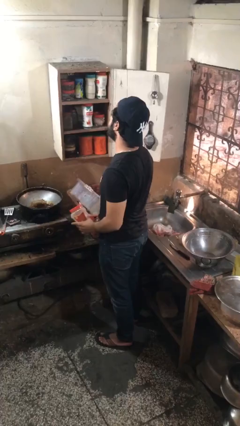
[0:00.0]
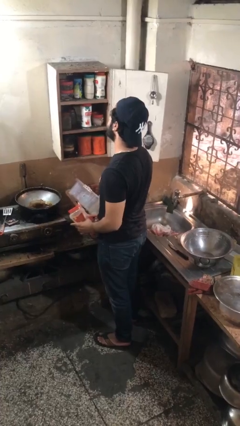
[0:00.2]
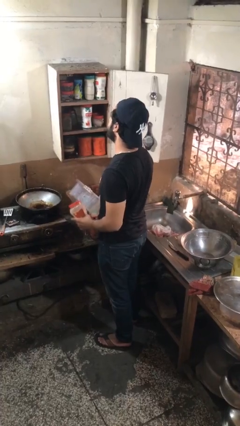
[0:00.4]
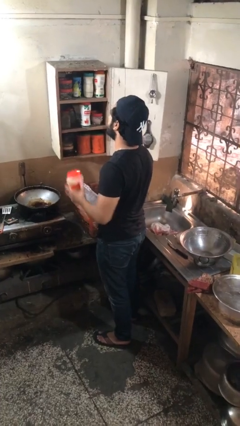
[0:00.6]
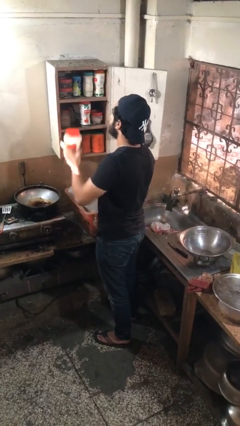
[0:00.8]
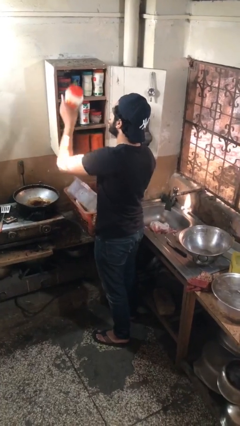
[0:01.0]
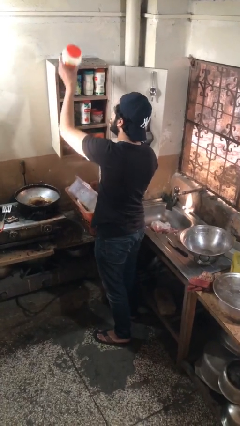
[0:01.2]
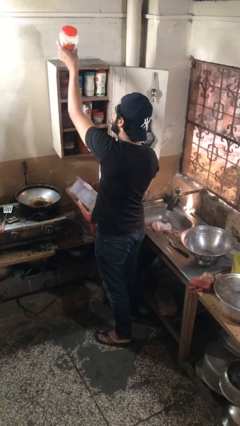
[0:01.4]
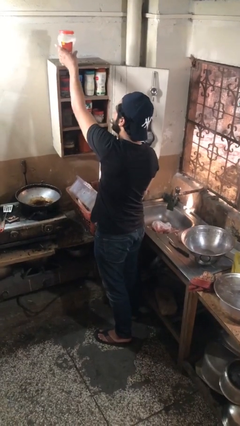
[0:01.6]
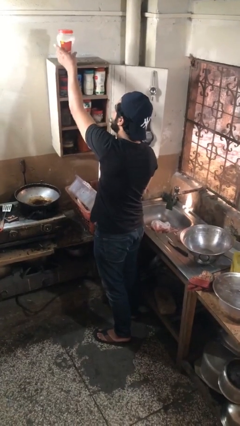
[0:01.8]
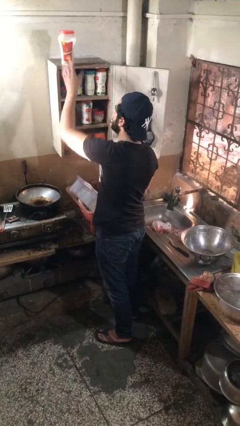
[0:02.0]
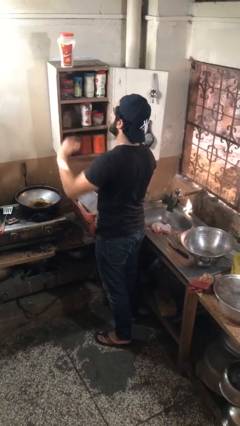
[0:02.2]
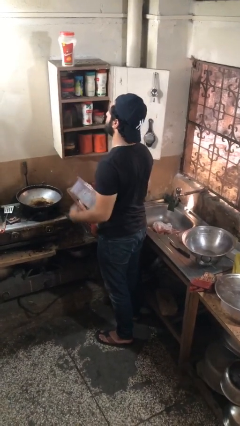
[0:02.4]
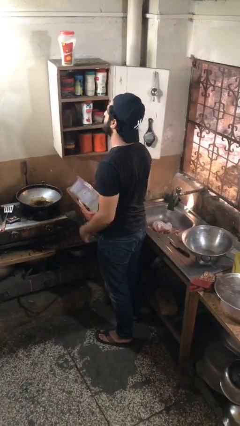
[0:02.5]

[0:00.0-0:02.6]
person puts object in cabinet

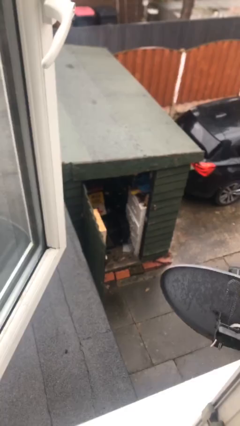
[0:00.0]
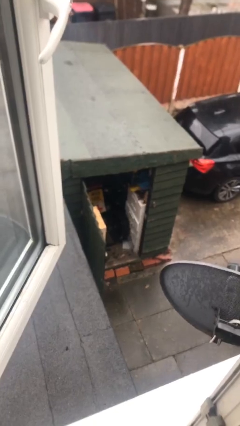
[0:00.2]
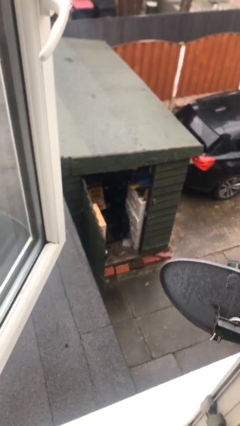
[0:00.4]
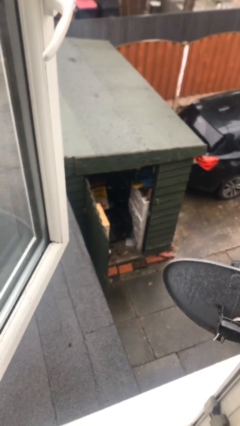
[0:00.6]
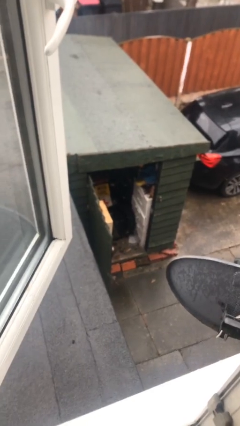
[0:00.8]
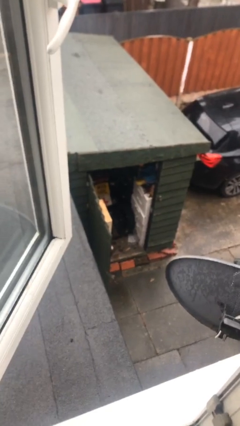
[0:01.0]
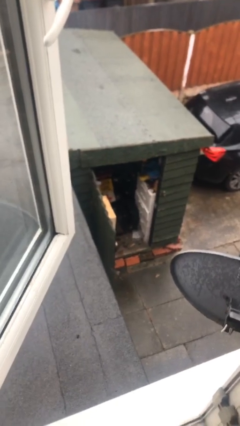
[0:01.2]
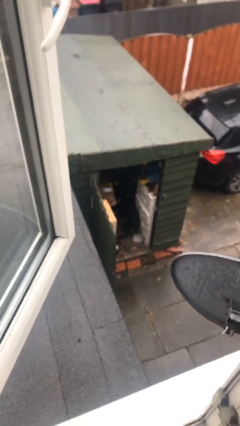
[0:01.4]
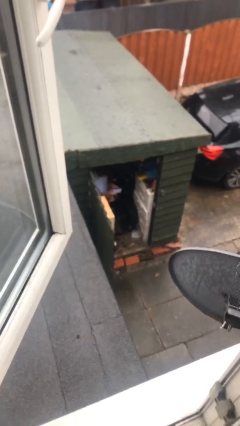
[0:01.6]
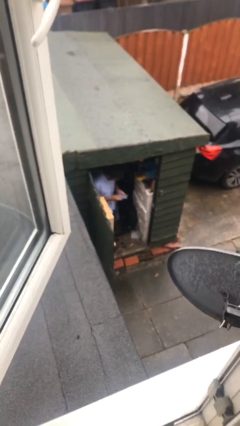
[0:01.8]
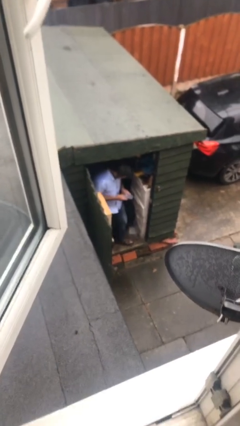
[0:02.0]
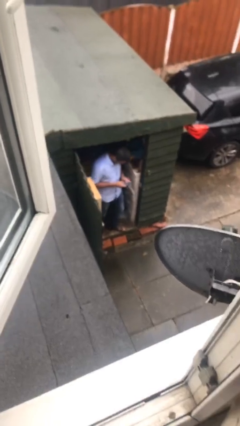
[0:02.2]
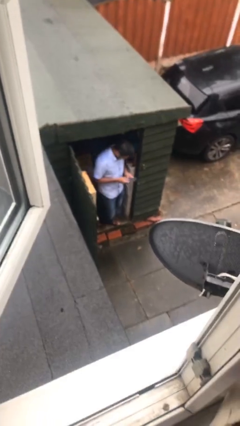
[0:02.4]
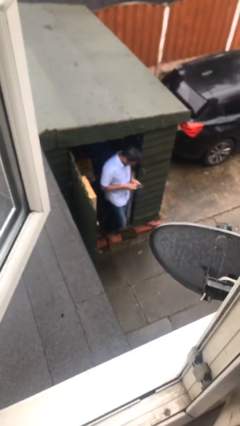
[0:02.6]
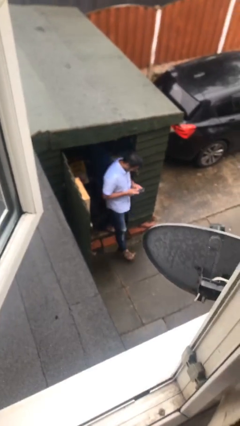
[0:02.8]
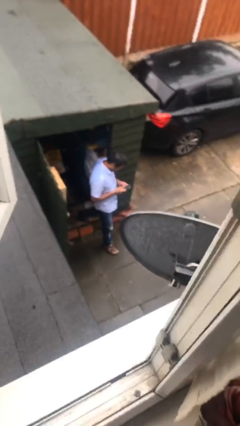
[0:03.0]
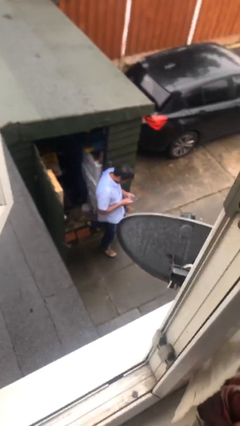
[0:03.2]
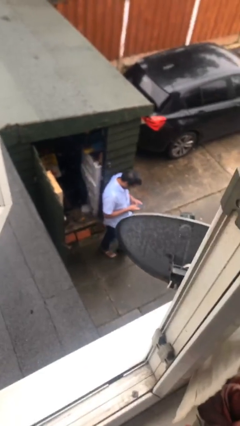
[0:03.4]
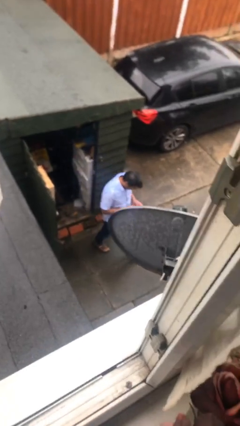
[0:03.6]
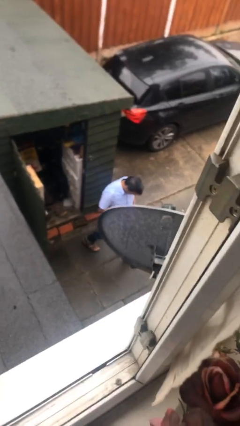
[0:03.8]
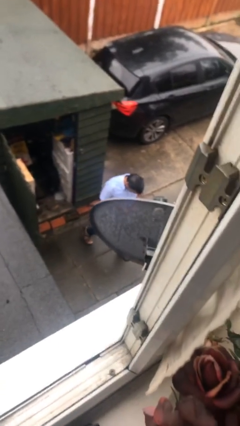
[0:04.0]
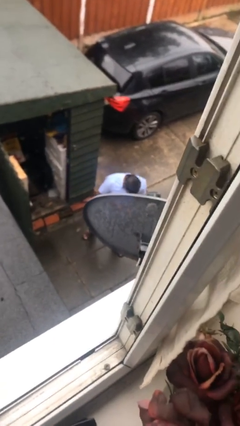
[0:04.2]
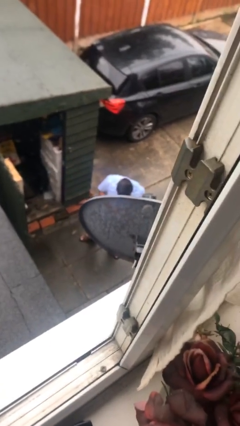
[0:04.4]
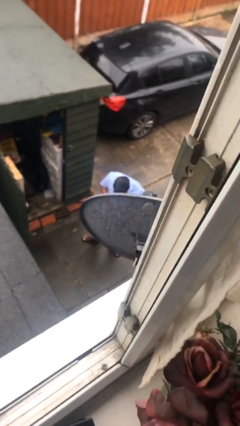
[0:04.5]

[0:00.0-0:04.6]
person enters scene through structure

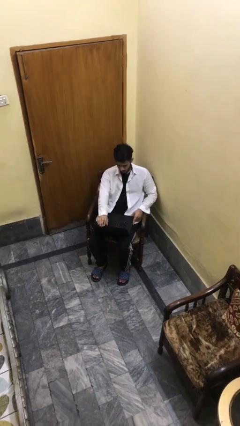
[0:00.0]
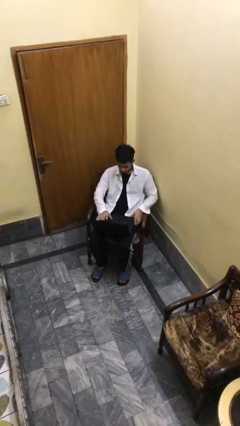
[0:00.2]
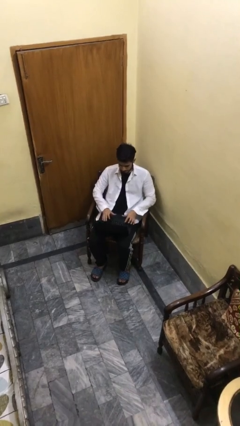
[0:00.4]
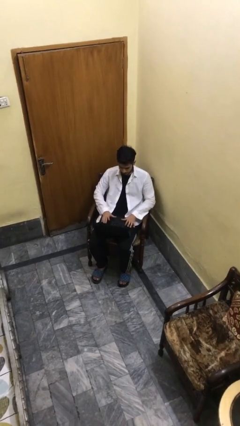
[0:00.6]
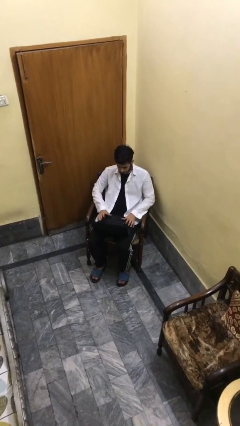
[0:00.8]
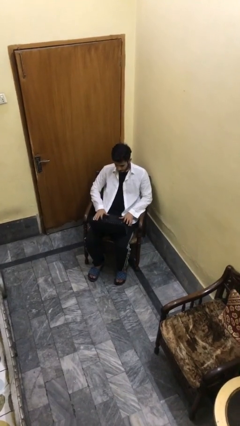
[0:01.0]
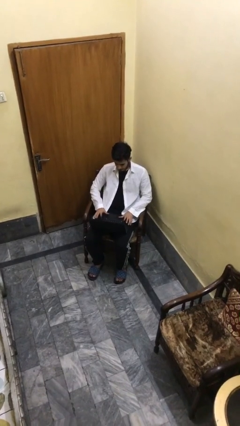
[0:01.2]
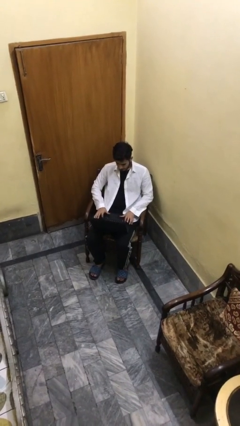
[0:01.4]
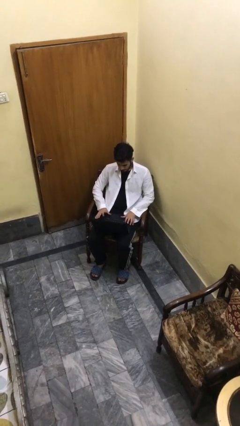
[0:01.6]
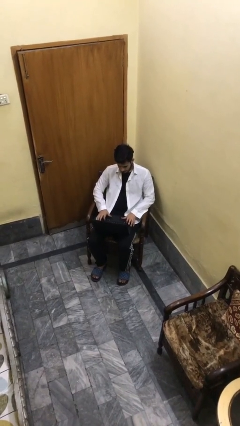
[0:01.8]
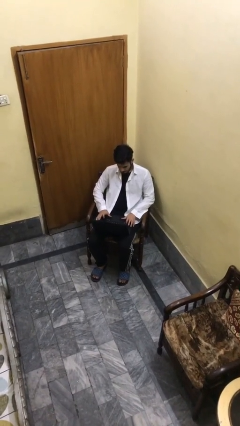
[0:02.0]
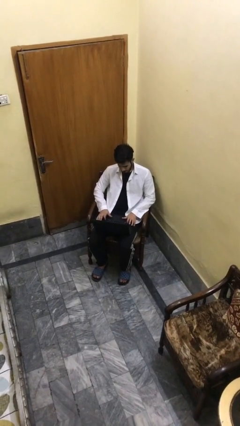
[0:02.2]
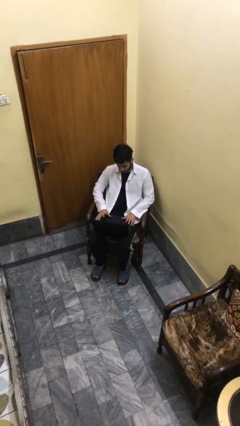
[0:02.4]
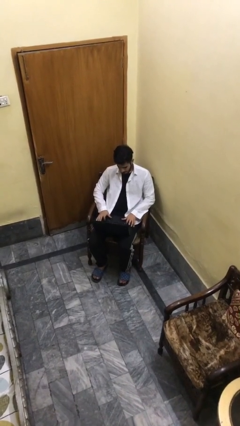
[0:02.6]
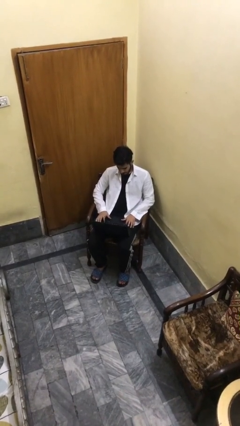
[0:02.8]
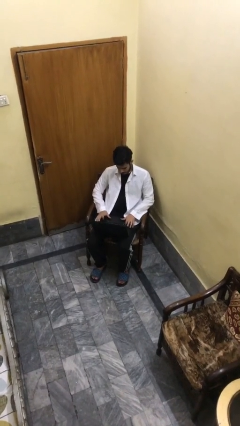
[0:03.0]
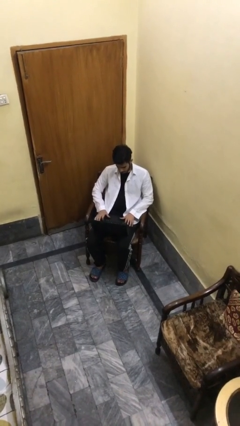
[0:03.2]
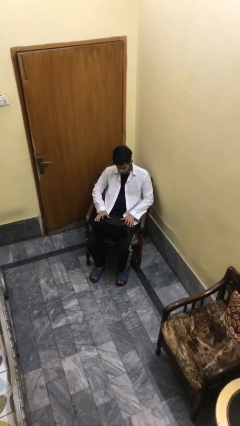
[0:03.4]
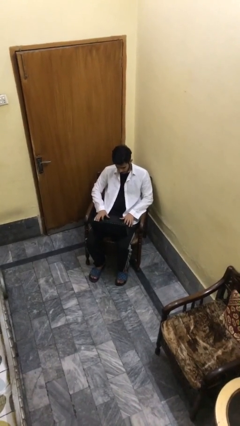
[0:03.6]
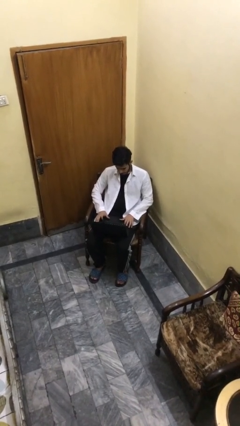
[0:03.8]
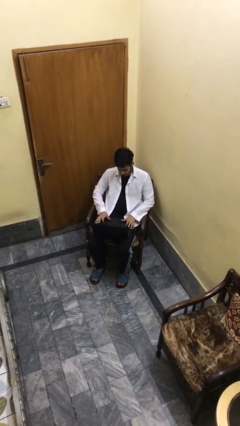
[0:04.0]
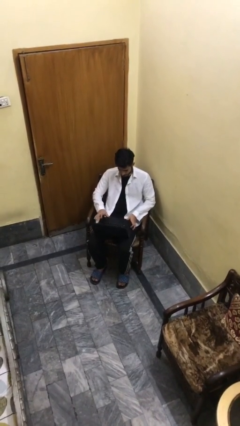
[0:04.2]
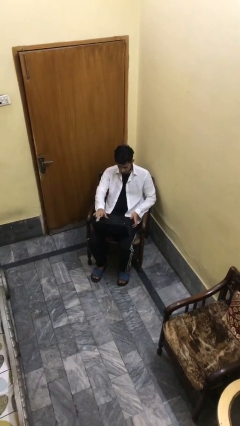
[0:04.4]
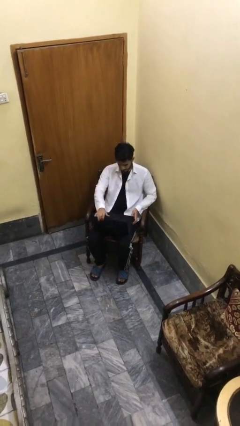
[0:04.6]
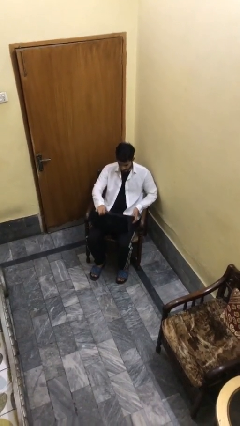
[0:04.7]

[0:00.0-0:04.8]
person interacts with laptop

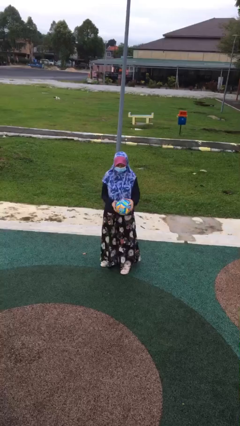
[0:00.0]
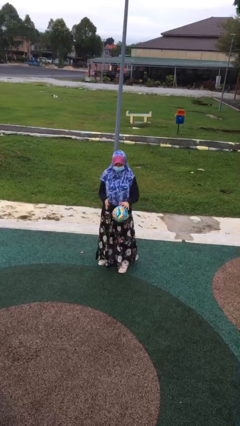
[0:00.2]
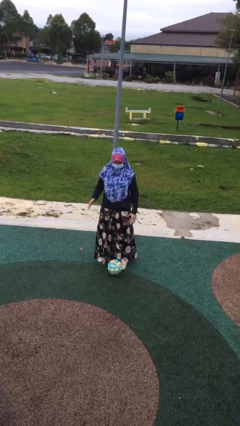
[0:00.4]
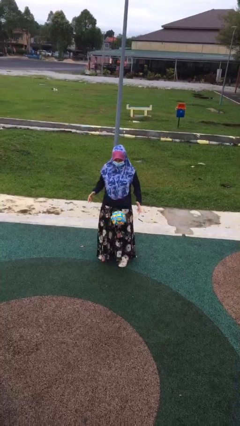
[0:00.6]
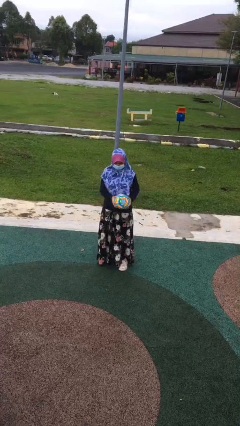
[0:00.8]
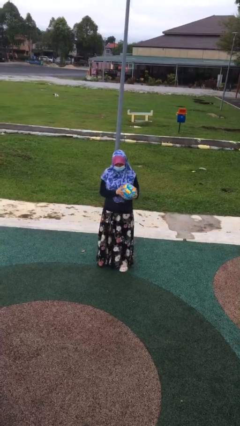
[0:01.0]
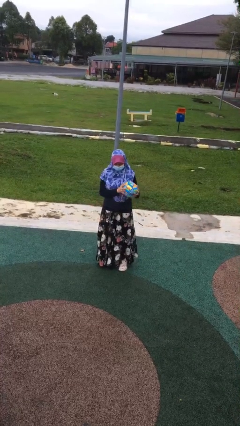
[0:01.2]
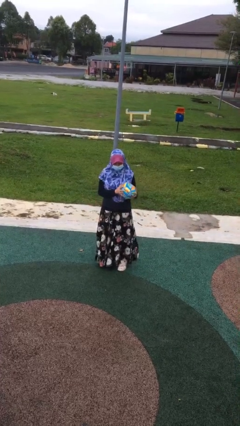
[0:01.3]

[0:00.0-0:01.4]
person bounces ball on floor

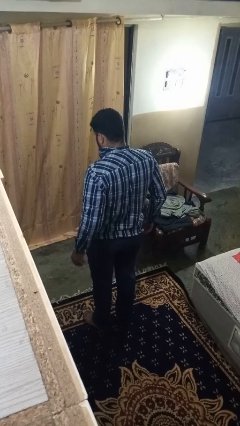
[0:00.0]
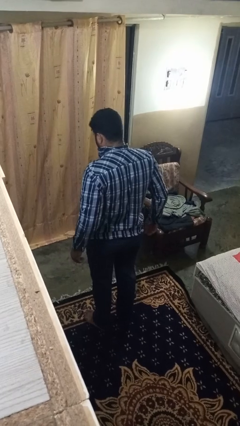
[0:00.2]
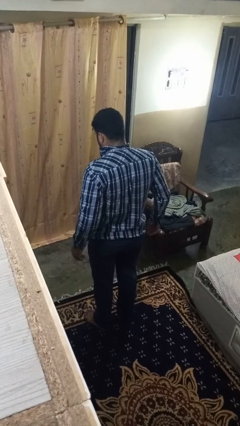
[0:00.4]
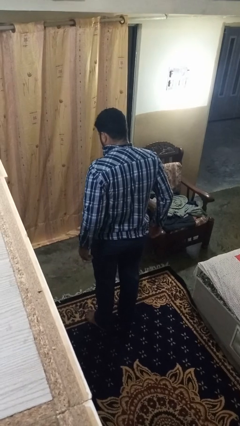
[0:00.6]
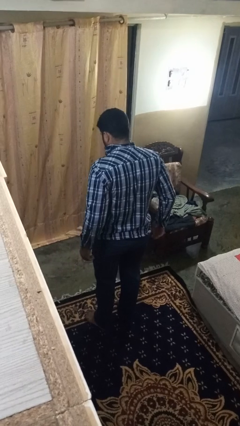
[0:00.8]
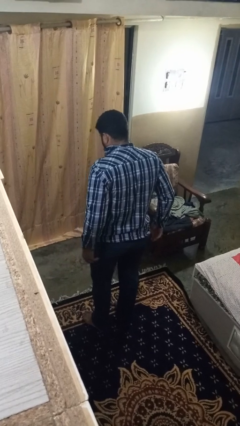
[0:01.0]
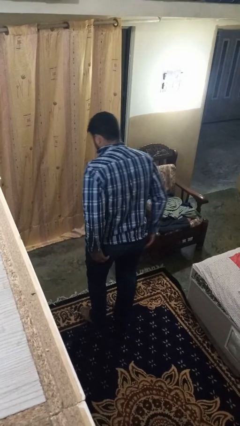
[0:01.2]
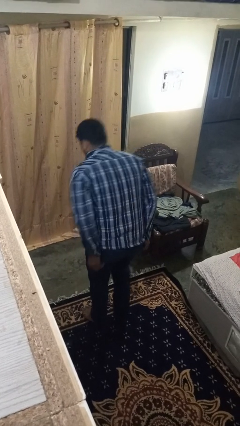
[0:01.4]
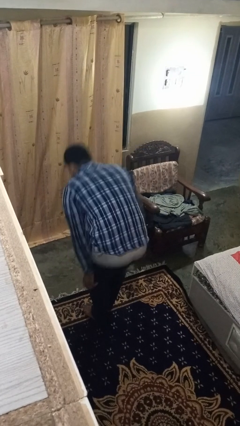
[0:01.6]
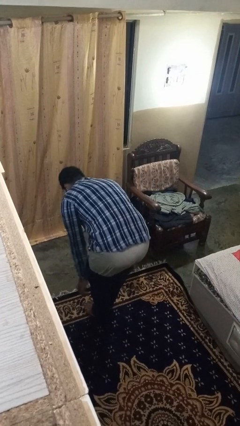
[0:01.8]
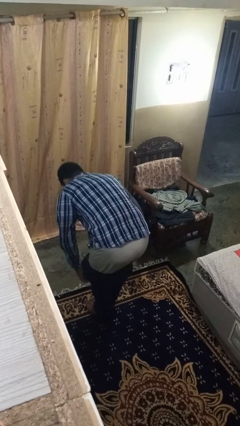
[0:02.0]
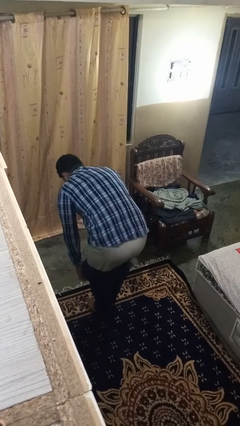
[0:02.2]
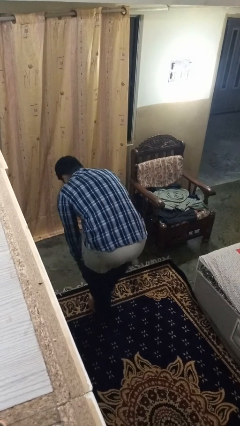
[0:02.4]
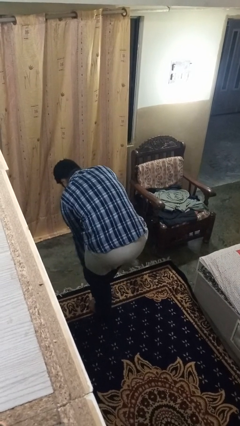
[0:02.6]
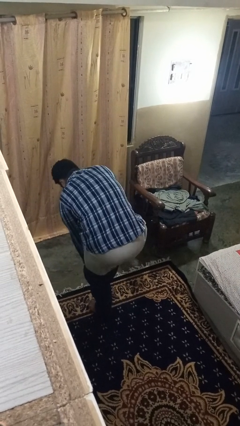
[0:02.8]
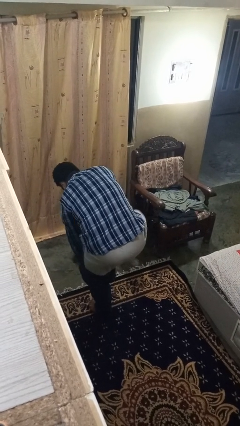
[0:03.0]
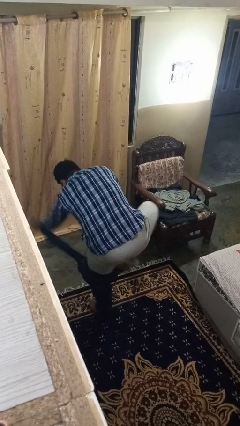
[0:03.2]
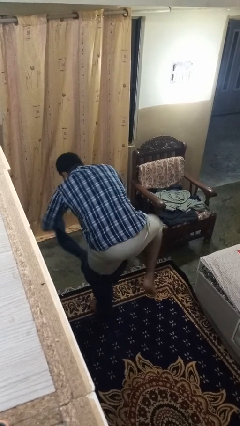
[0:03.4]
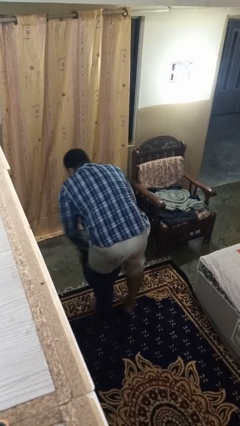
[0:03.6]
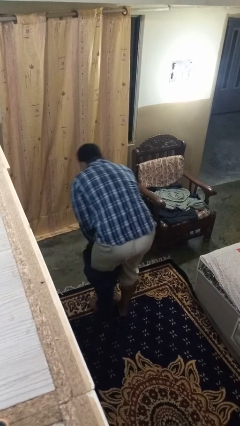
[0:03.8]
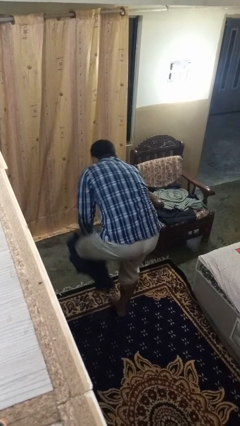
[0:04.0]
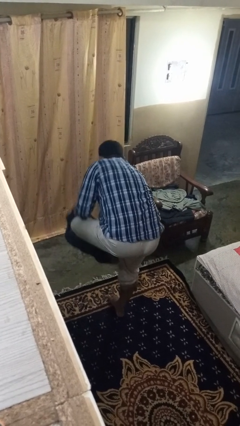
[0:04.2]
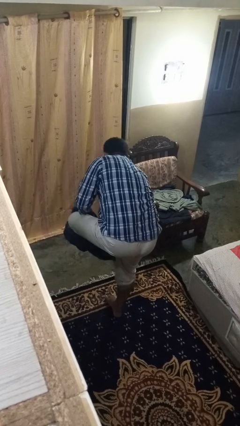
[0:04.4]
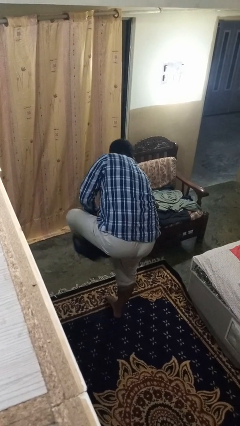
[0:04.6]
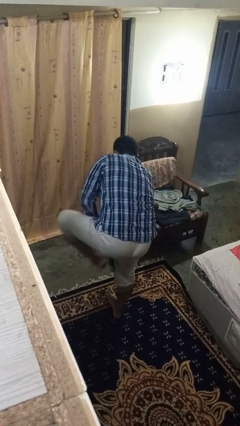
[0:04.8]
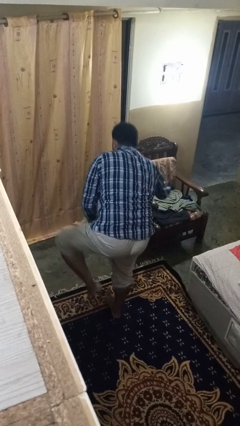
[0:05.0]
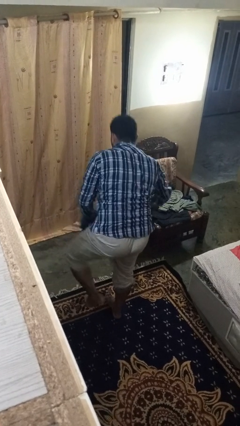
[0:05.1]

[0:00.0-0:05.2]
person takes off pants
